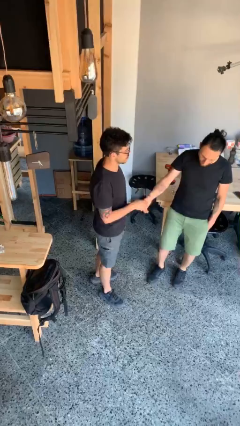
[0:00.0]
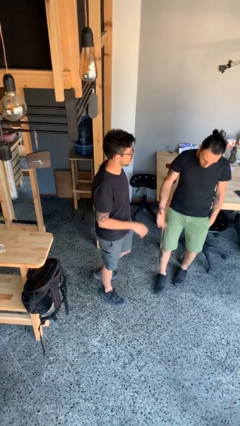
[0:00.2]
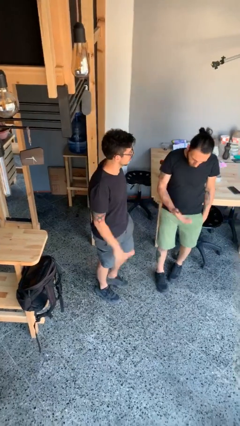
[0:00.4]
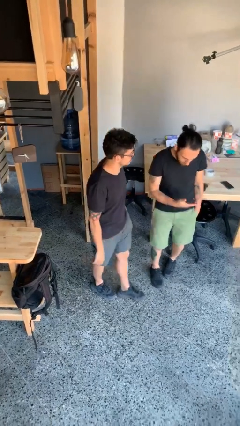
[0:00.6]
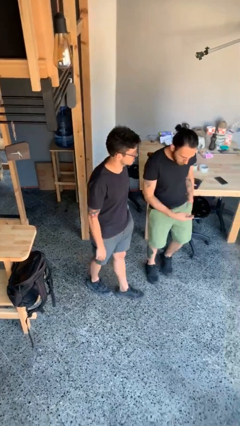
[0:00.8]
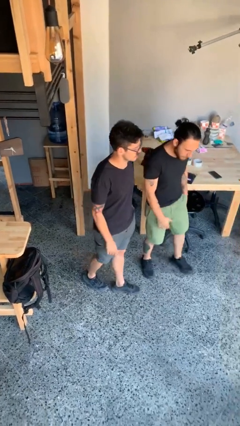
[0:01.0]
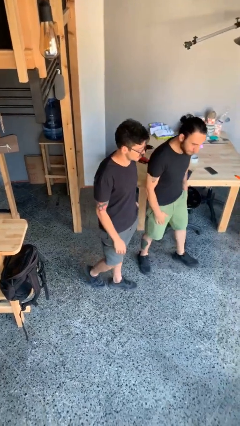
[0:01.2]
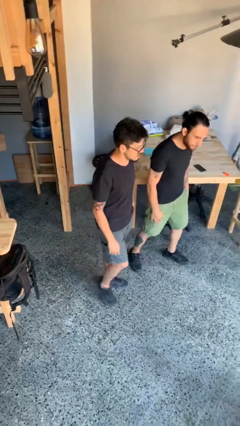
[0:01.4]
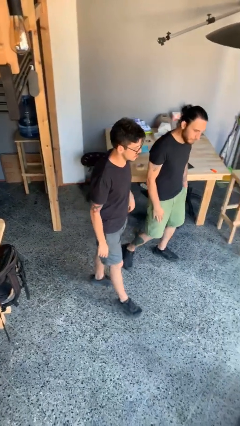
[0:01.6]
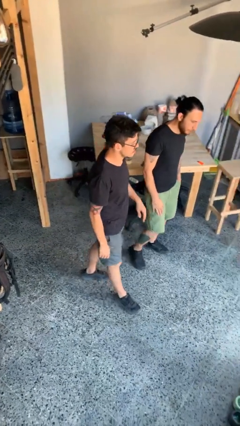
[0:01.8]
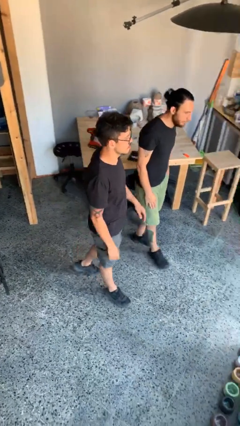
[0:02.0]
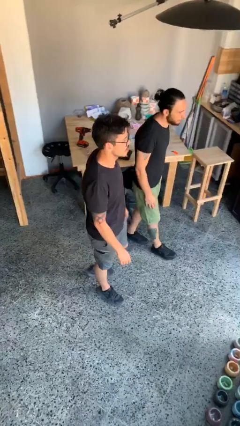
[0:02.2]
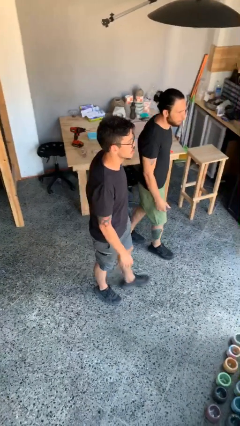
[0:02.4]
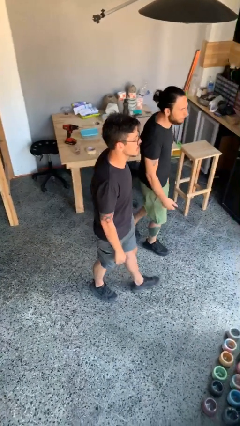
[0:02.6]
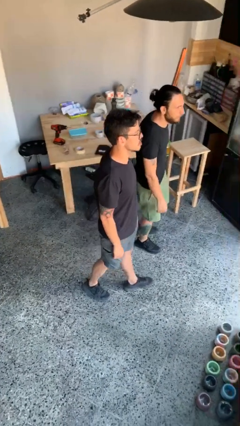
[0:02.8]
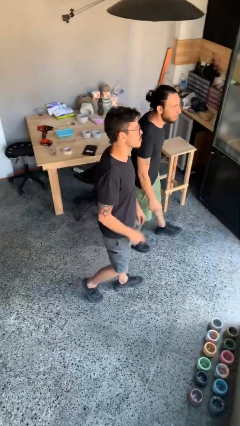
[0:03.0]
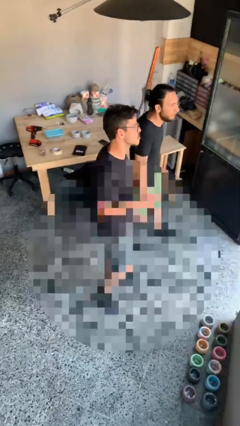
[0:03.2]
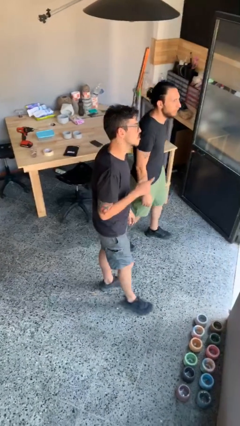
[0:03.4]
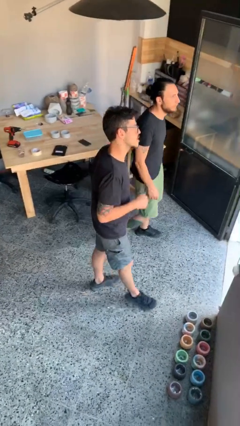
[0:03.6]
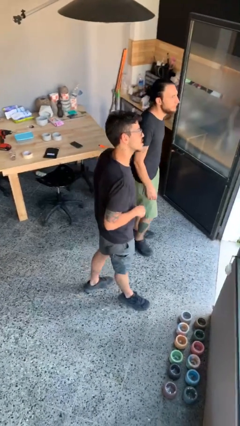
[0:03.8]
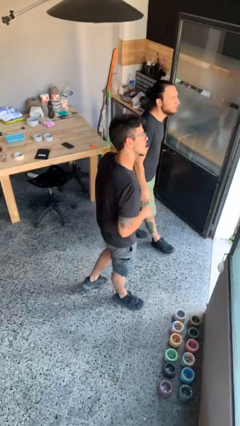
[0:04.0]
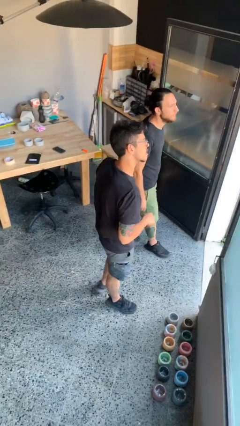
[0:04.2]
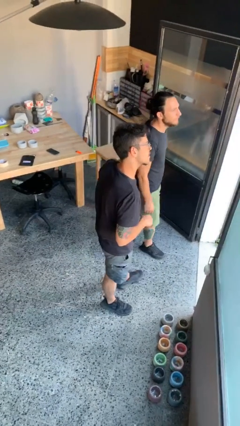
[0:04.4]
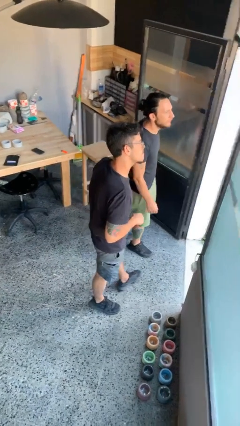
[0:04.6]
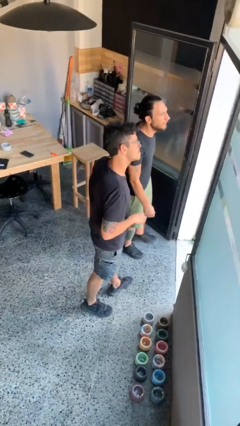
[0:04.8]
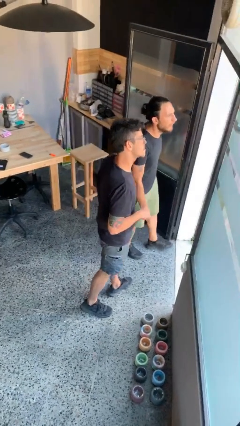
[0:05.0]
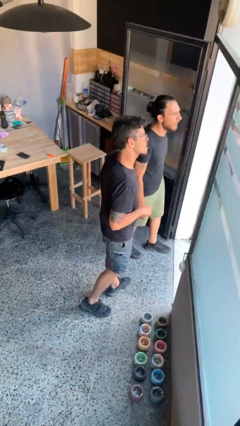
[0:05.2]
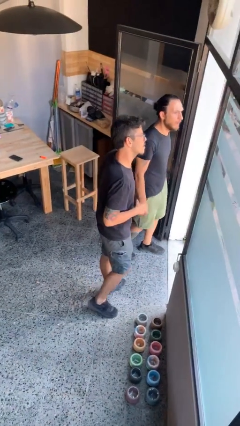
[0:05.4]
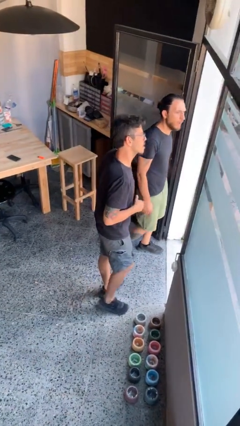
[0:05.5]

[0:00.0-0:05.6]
person talks to person

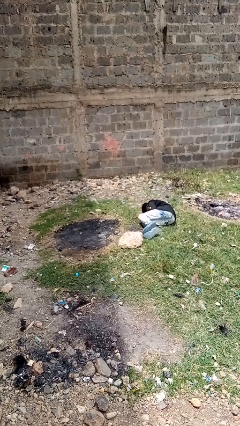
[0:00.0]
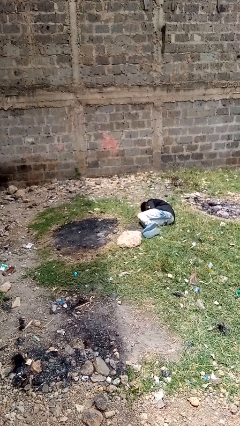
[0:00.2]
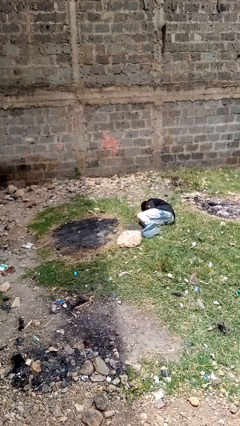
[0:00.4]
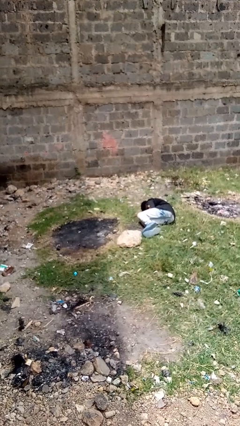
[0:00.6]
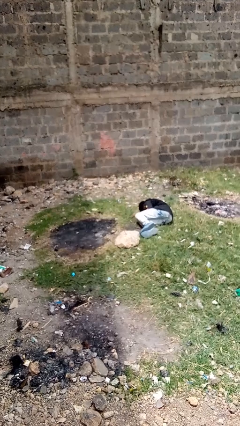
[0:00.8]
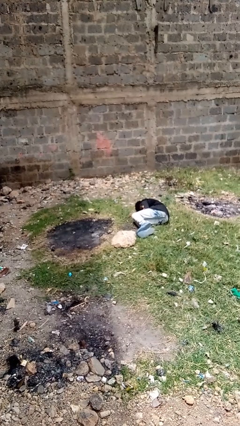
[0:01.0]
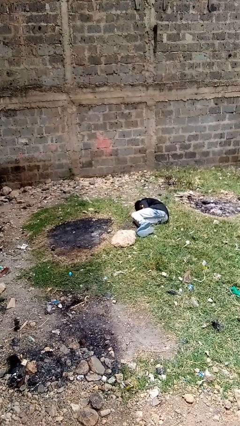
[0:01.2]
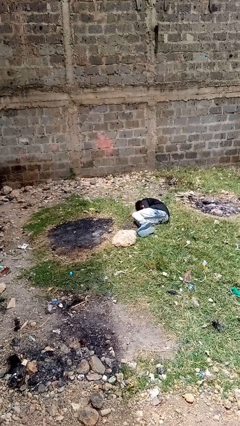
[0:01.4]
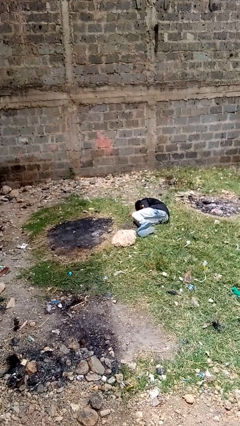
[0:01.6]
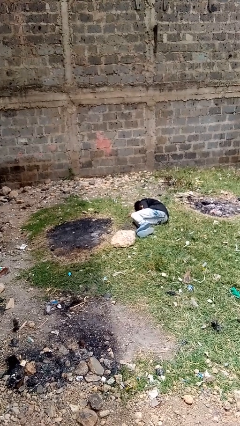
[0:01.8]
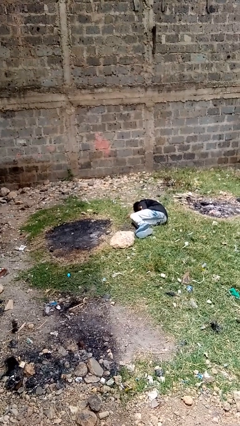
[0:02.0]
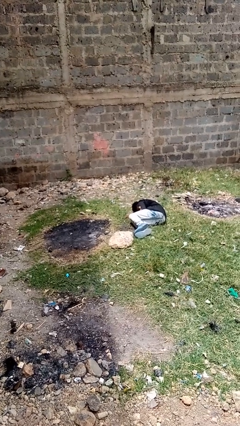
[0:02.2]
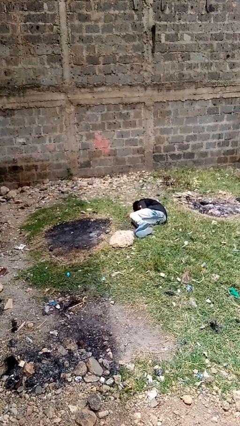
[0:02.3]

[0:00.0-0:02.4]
person lies down on floor

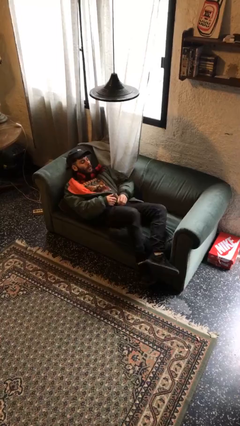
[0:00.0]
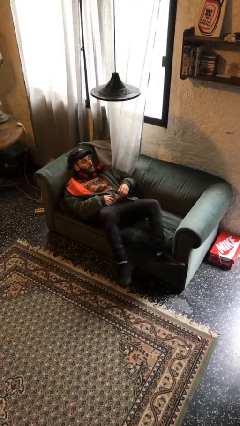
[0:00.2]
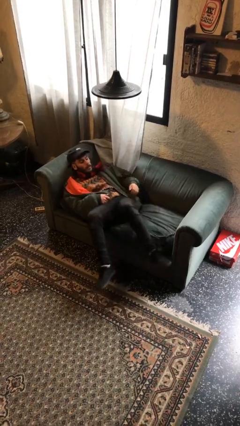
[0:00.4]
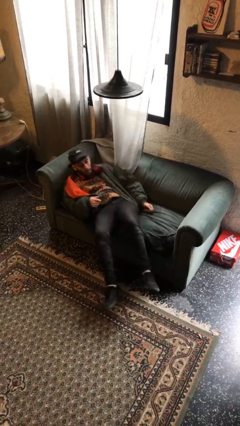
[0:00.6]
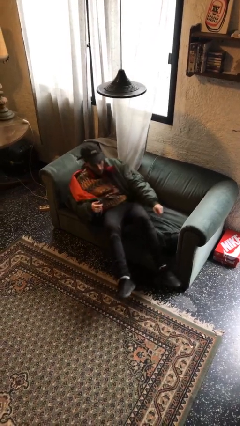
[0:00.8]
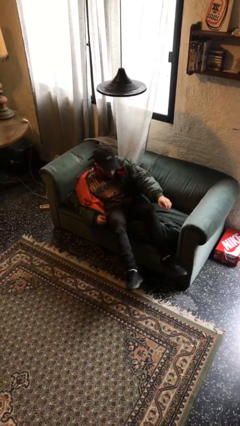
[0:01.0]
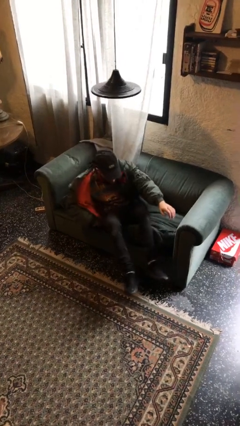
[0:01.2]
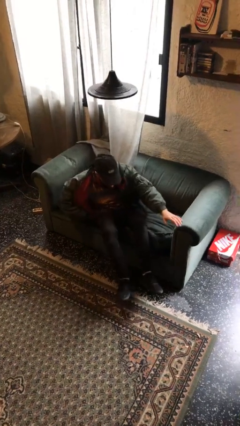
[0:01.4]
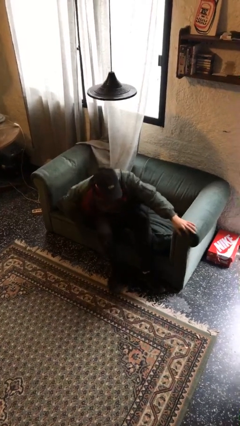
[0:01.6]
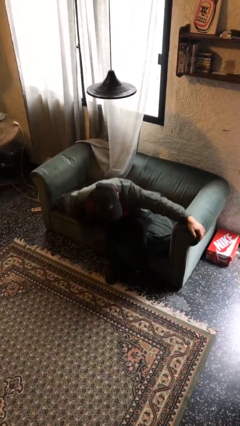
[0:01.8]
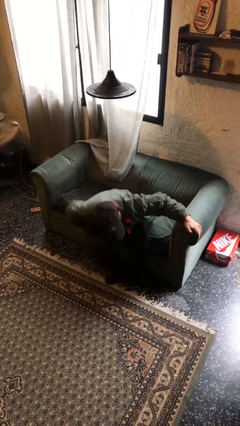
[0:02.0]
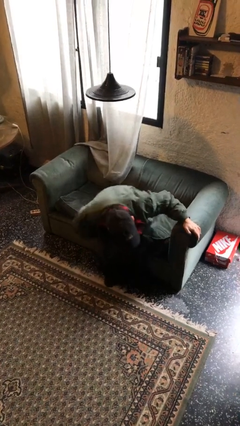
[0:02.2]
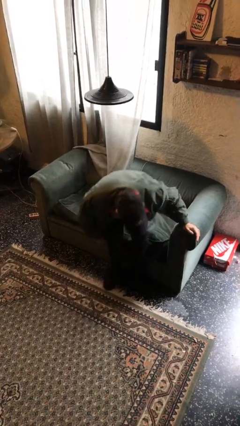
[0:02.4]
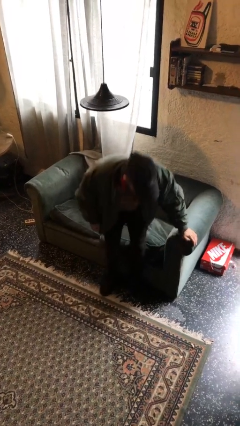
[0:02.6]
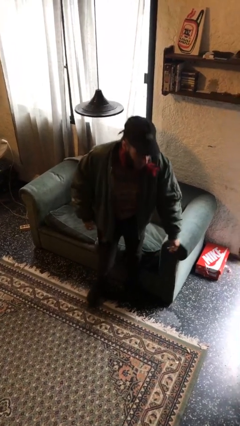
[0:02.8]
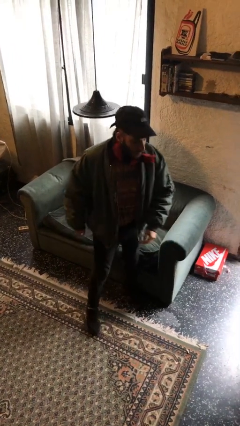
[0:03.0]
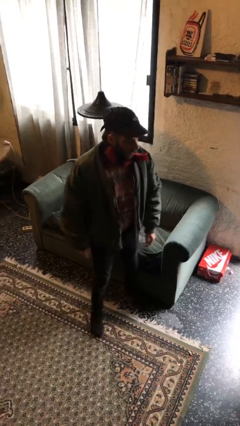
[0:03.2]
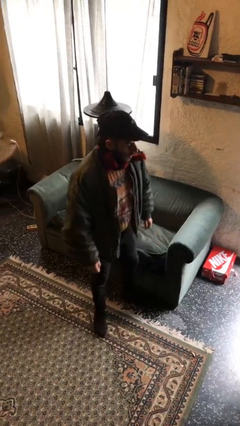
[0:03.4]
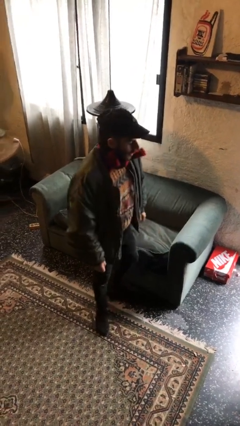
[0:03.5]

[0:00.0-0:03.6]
person stands up

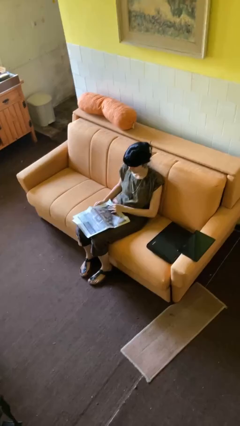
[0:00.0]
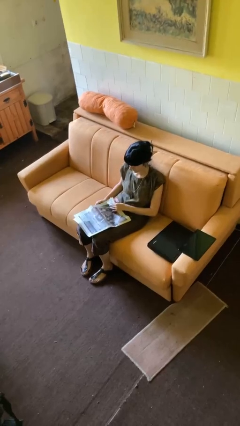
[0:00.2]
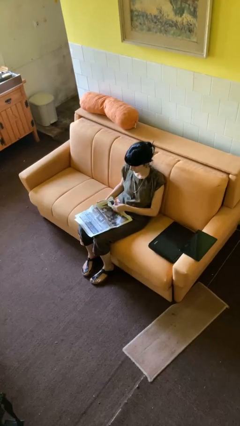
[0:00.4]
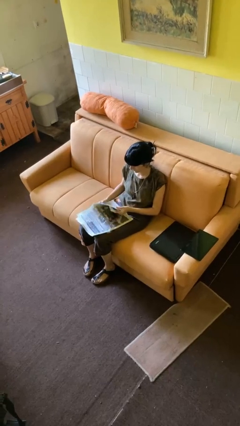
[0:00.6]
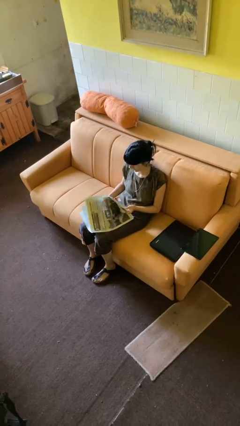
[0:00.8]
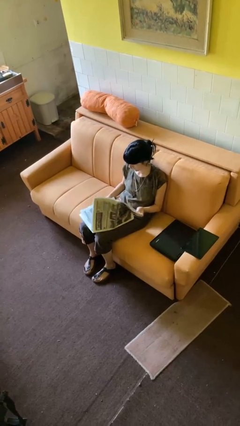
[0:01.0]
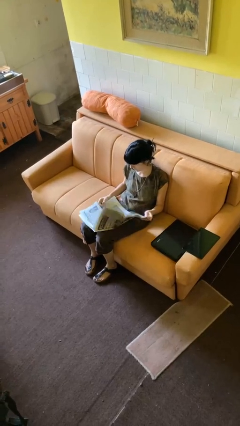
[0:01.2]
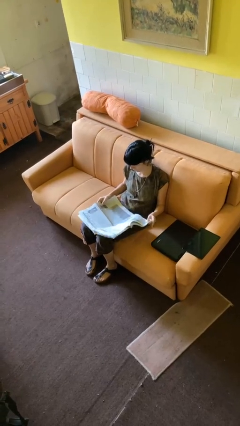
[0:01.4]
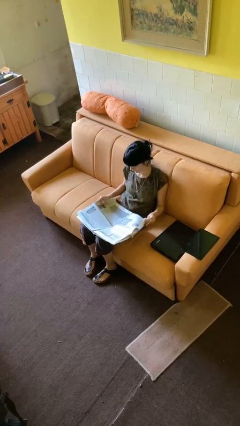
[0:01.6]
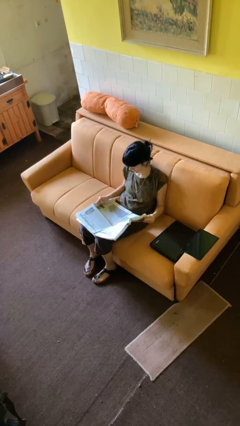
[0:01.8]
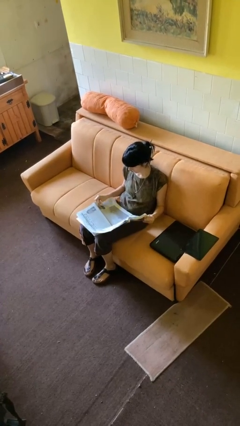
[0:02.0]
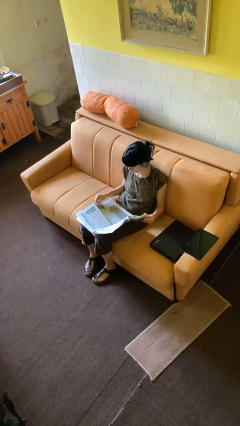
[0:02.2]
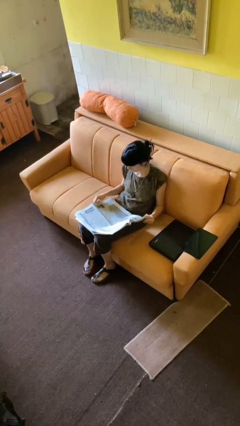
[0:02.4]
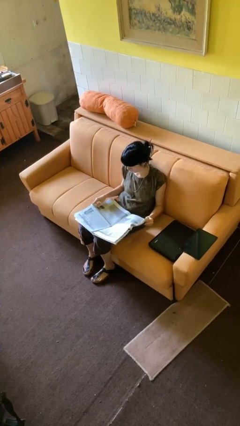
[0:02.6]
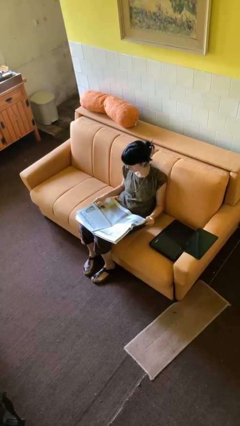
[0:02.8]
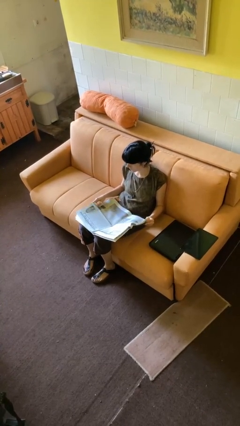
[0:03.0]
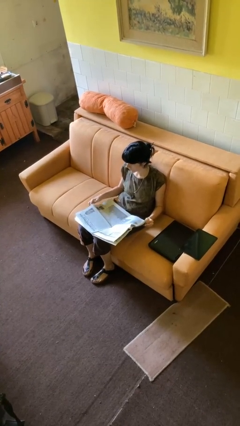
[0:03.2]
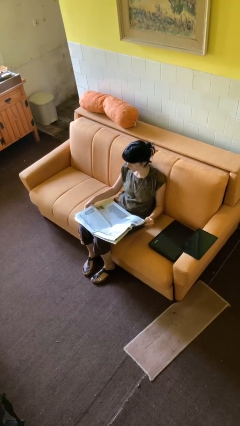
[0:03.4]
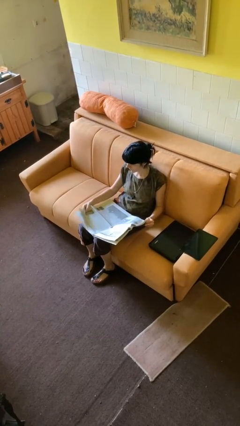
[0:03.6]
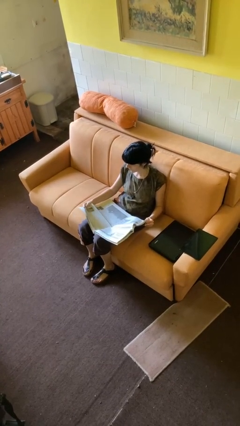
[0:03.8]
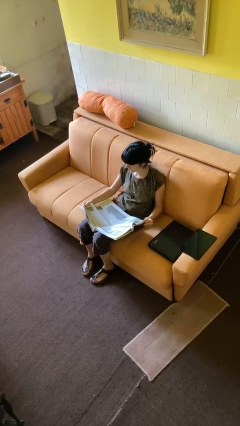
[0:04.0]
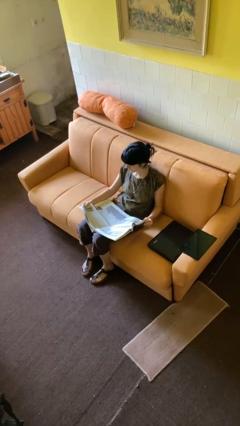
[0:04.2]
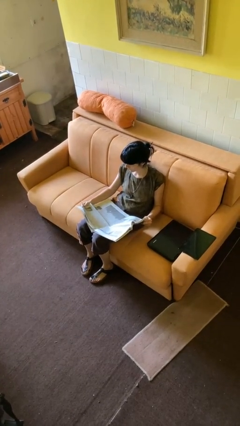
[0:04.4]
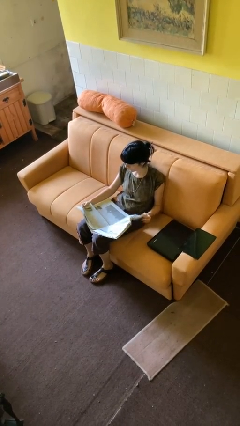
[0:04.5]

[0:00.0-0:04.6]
person reads newspaper

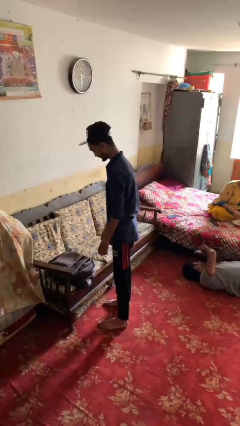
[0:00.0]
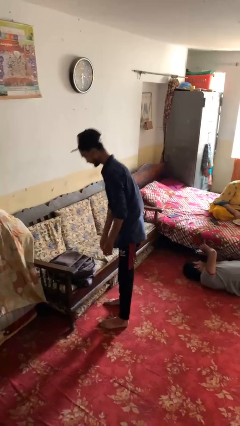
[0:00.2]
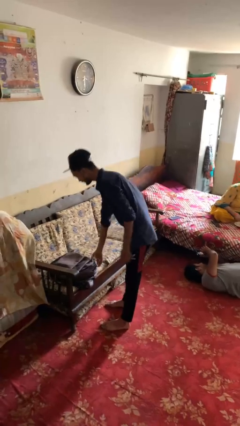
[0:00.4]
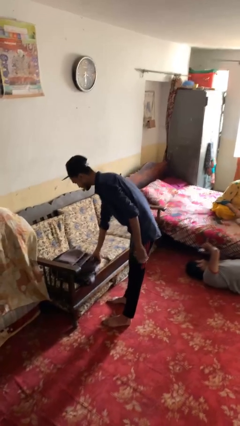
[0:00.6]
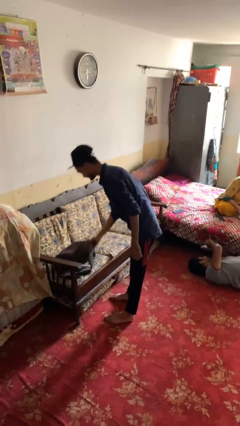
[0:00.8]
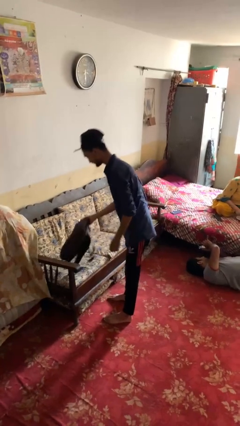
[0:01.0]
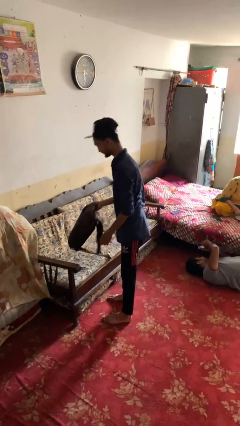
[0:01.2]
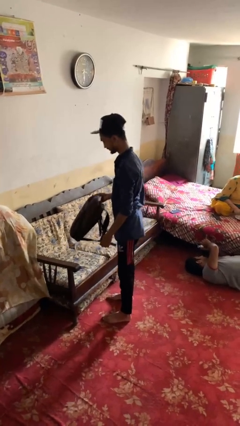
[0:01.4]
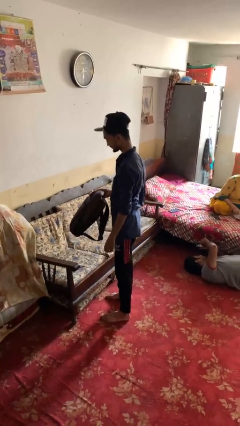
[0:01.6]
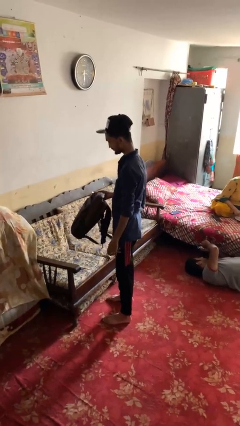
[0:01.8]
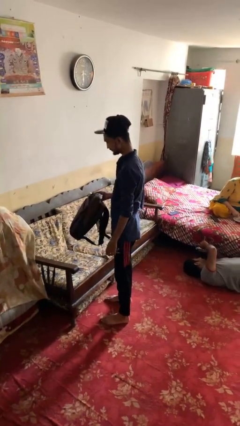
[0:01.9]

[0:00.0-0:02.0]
person picks up object from couch
